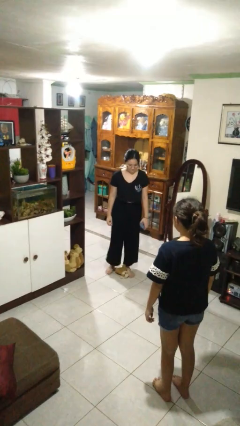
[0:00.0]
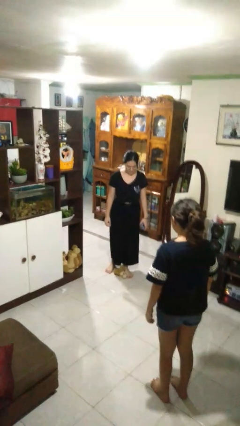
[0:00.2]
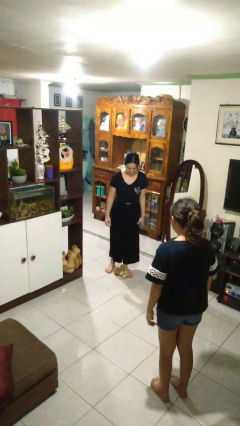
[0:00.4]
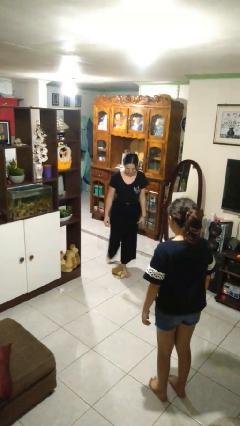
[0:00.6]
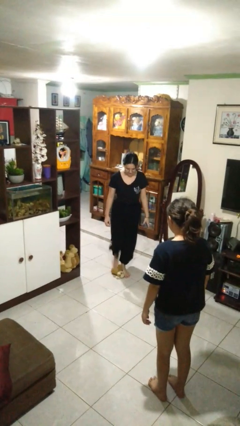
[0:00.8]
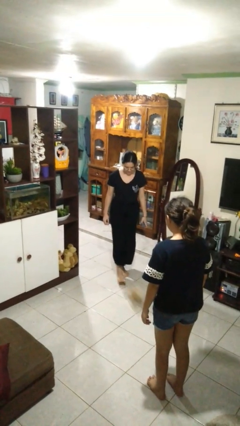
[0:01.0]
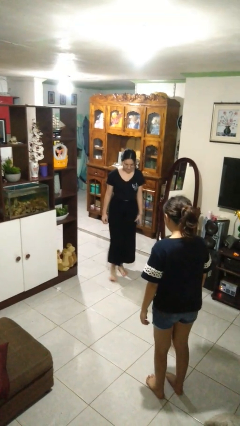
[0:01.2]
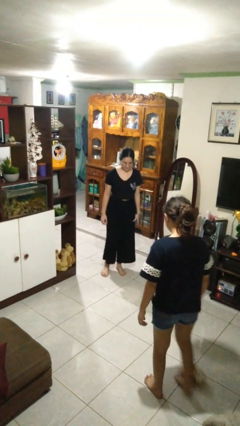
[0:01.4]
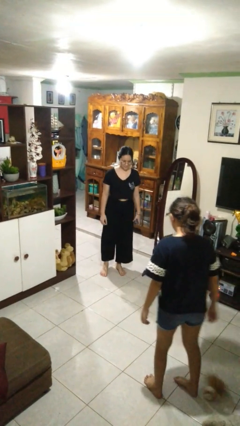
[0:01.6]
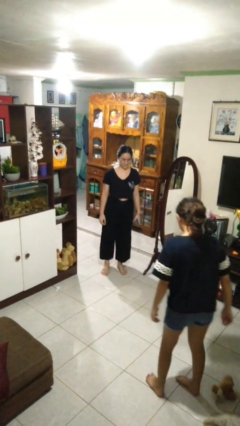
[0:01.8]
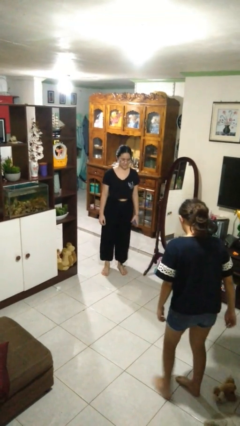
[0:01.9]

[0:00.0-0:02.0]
person kicks object to person

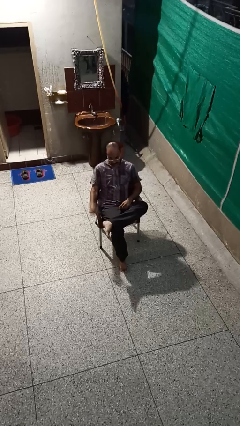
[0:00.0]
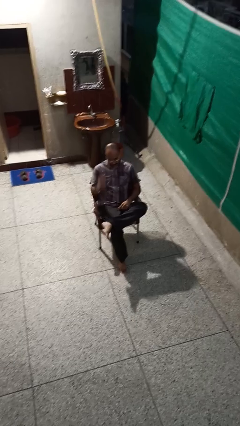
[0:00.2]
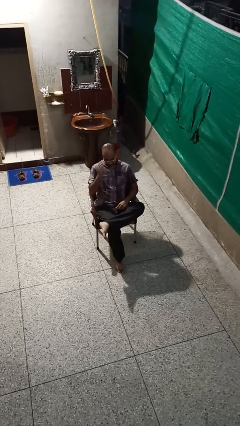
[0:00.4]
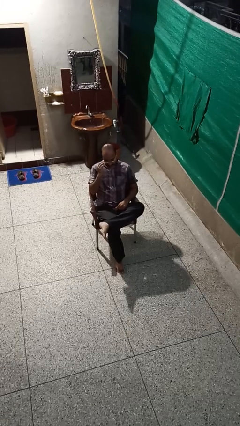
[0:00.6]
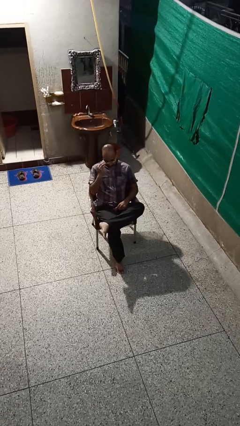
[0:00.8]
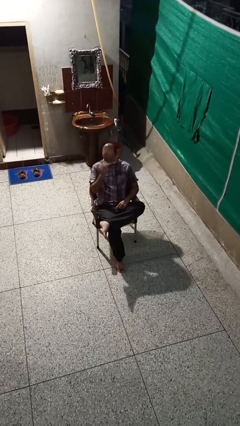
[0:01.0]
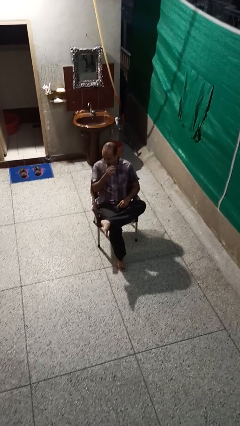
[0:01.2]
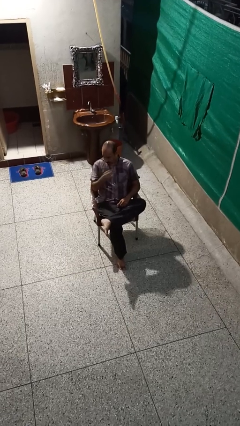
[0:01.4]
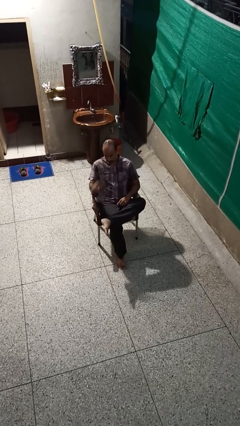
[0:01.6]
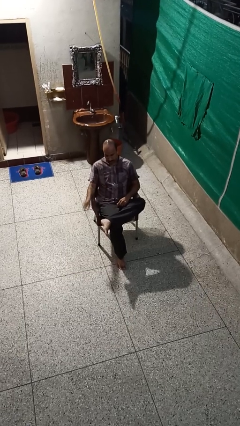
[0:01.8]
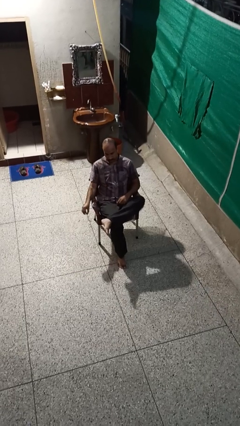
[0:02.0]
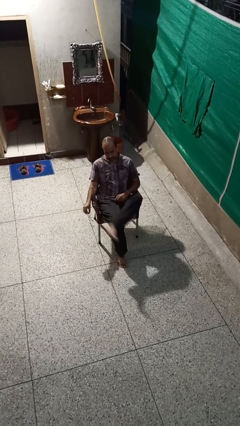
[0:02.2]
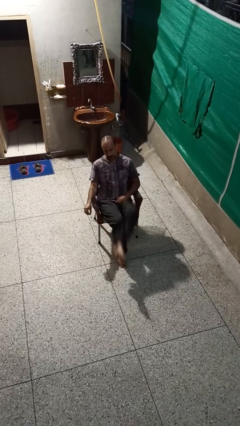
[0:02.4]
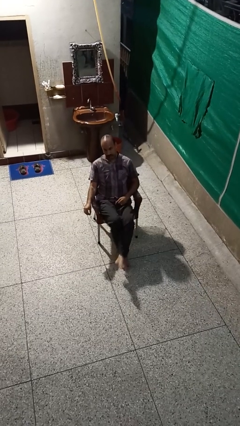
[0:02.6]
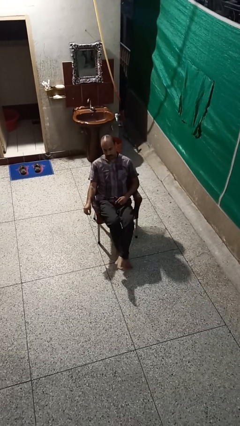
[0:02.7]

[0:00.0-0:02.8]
person takes off glasses

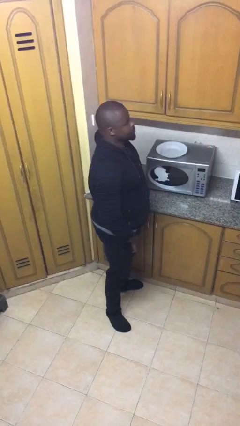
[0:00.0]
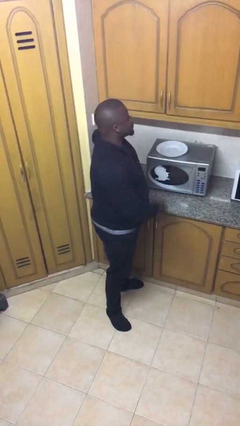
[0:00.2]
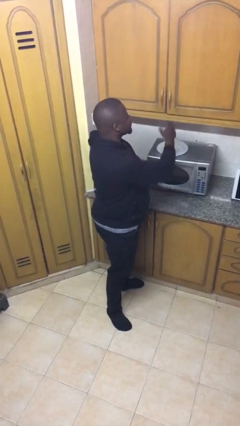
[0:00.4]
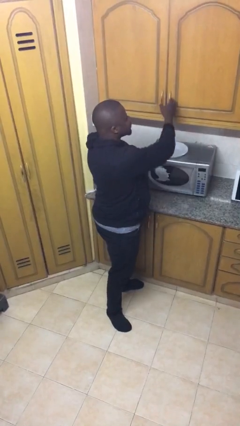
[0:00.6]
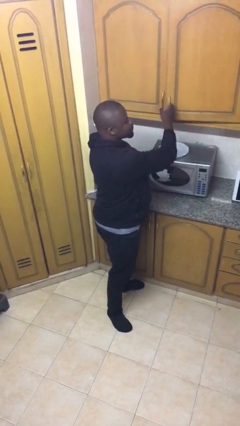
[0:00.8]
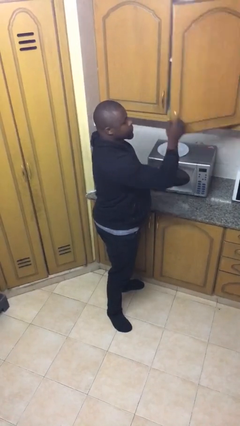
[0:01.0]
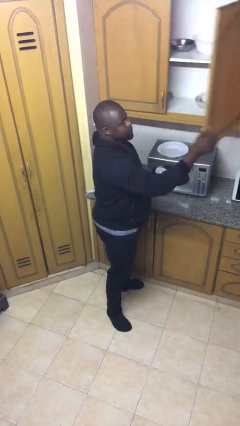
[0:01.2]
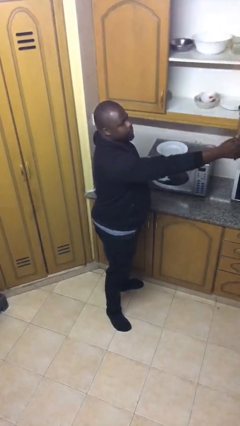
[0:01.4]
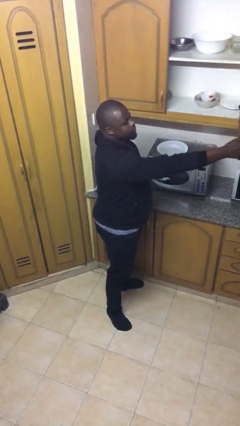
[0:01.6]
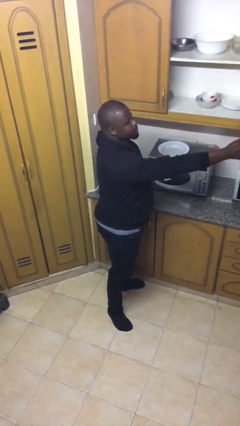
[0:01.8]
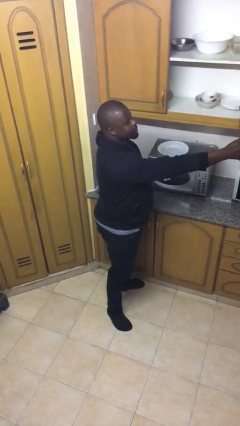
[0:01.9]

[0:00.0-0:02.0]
person opens cabinet

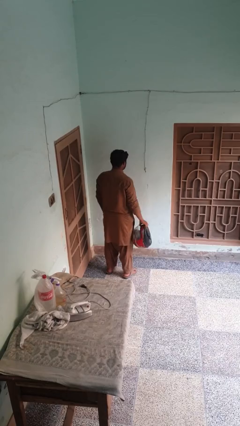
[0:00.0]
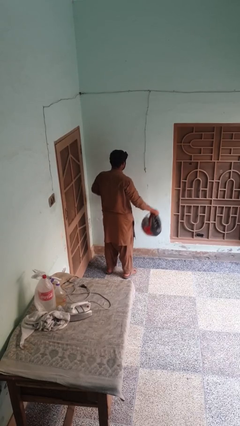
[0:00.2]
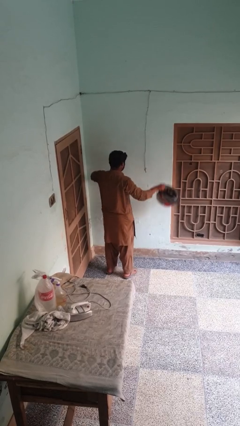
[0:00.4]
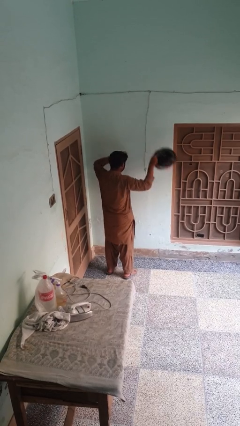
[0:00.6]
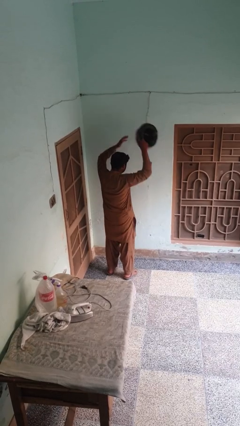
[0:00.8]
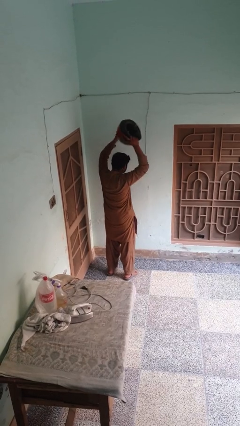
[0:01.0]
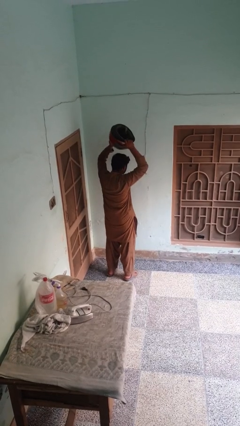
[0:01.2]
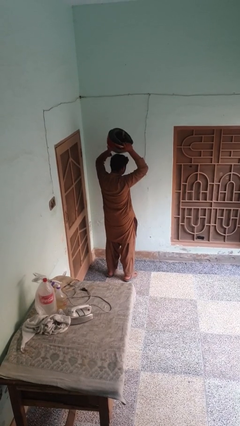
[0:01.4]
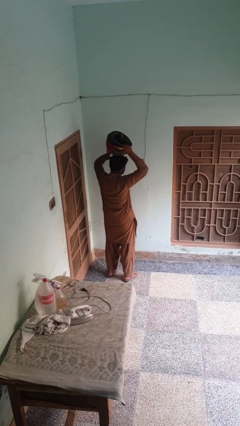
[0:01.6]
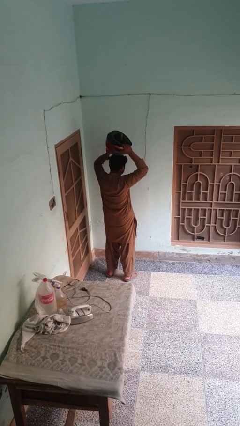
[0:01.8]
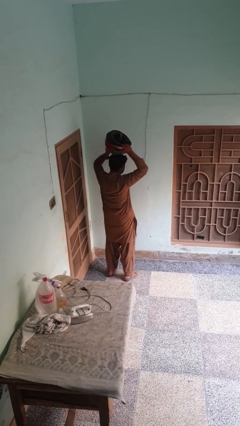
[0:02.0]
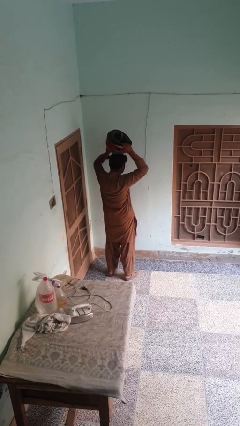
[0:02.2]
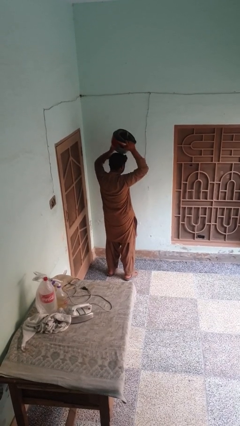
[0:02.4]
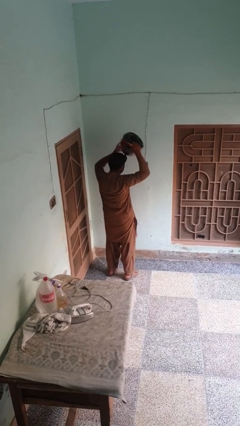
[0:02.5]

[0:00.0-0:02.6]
person holds object above head

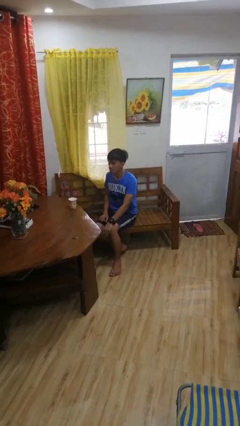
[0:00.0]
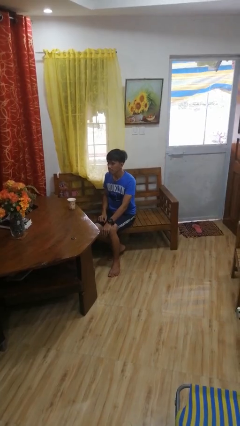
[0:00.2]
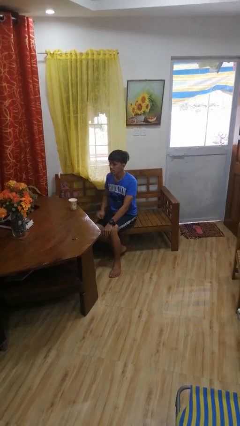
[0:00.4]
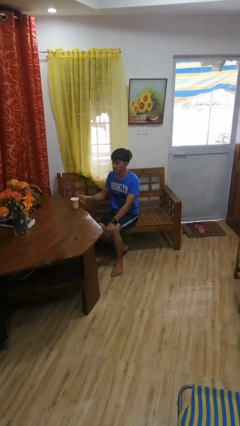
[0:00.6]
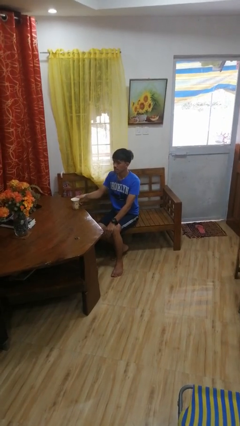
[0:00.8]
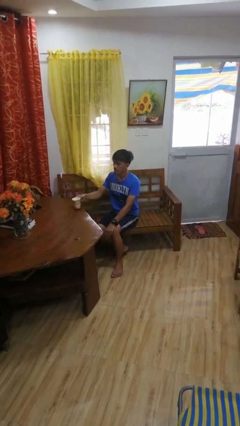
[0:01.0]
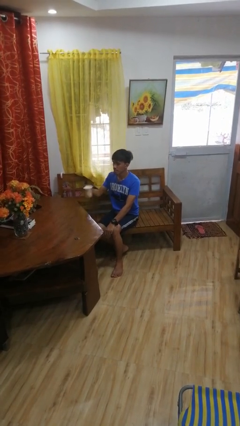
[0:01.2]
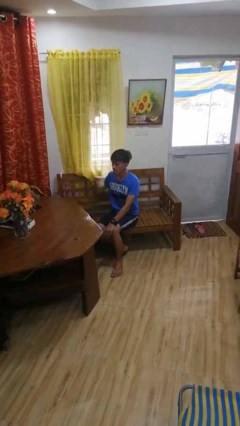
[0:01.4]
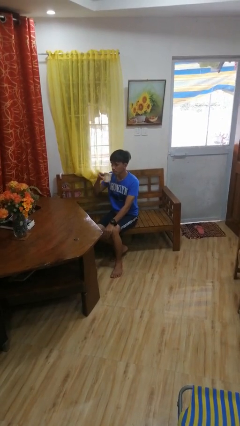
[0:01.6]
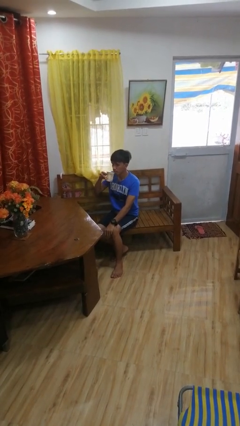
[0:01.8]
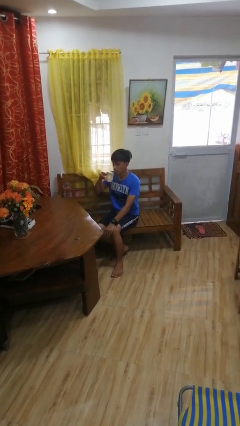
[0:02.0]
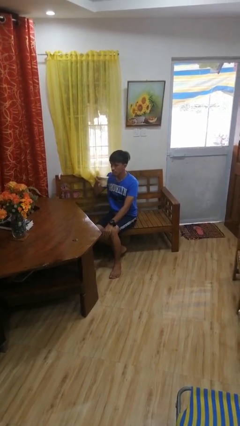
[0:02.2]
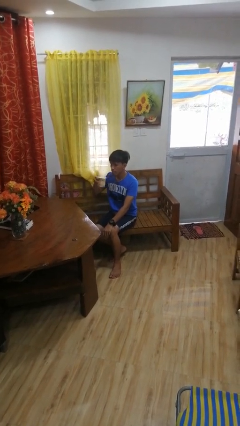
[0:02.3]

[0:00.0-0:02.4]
person picks up object from table

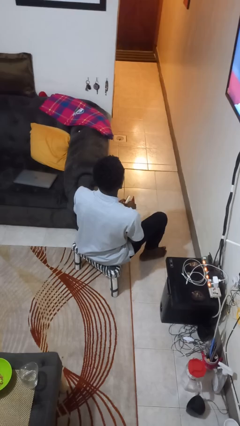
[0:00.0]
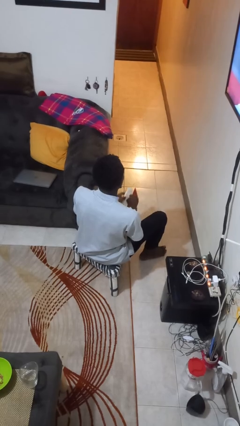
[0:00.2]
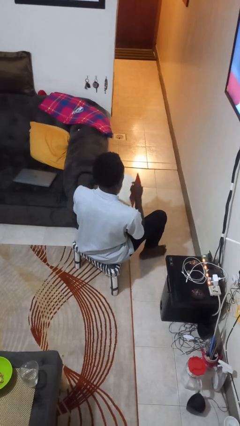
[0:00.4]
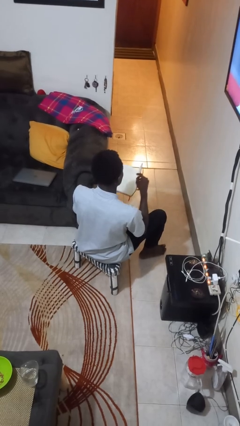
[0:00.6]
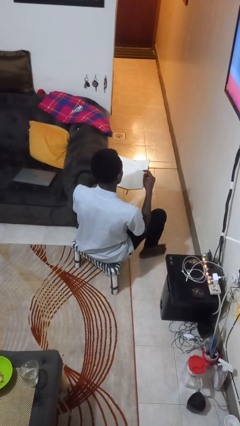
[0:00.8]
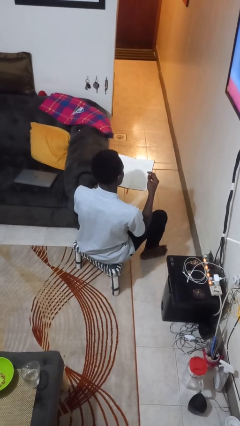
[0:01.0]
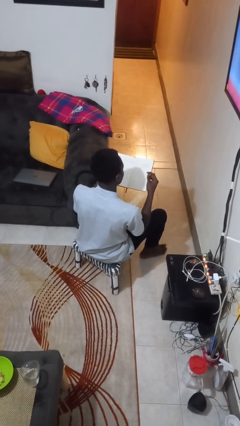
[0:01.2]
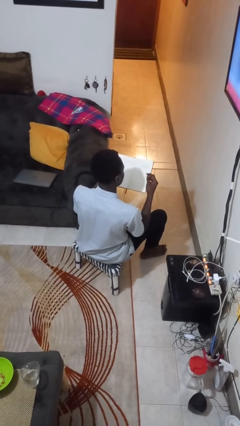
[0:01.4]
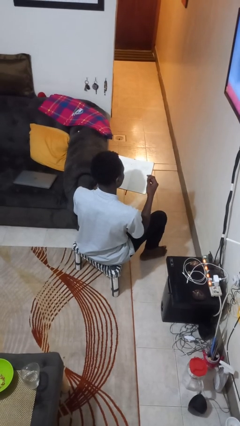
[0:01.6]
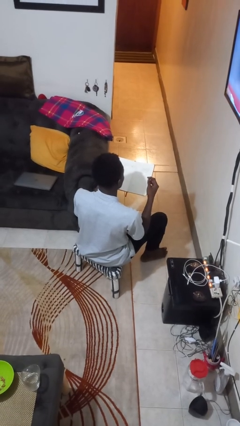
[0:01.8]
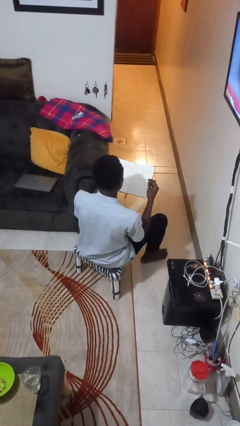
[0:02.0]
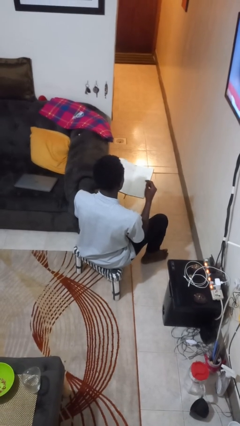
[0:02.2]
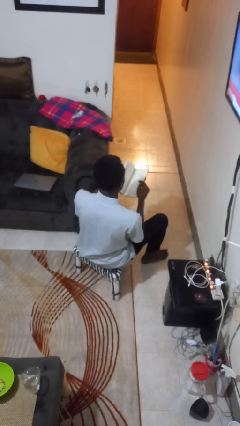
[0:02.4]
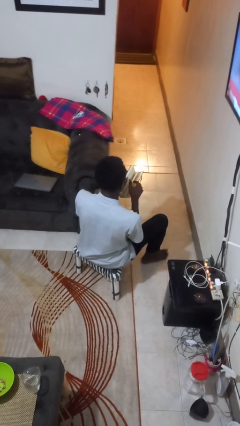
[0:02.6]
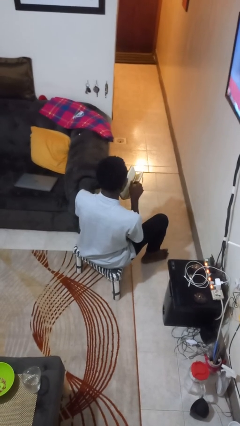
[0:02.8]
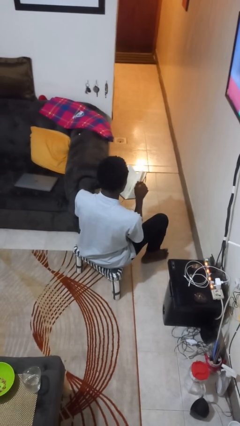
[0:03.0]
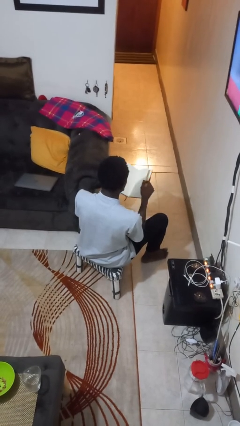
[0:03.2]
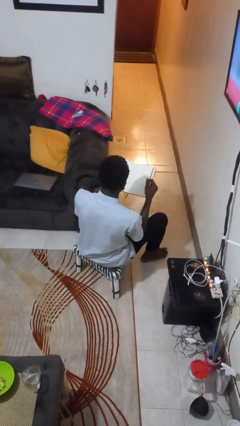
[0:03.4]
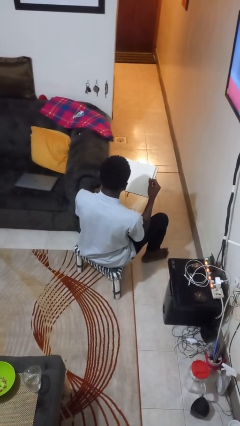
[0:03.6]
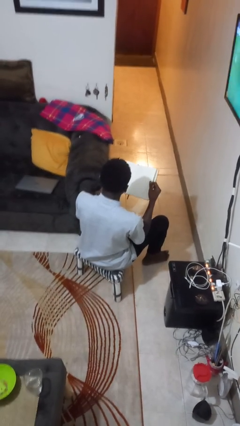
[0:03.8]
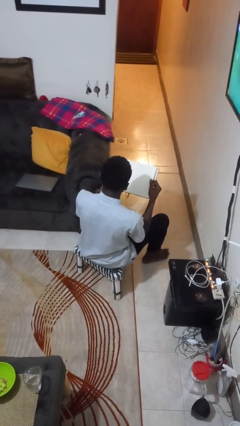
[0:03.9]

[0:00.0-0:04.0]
person reads book

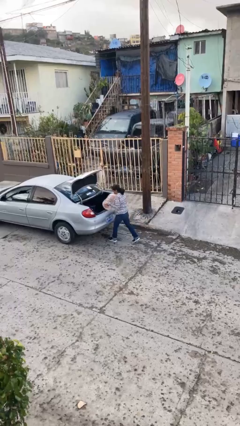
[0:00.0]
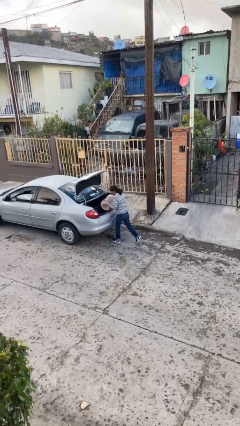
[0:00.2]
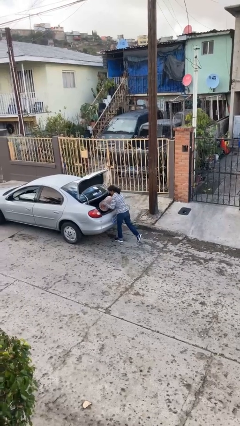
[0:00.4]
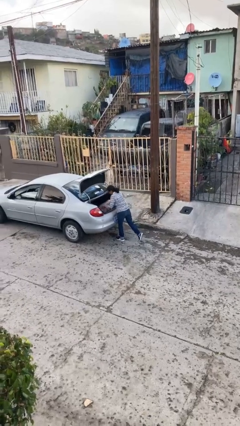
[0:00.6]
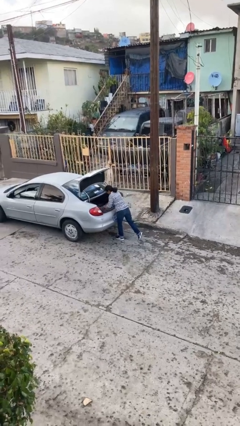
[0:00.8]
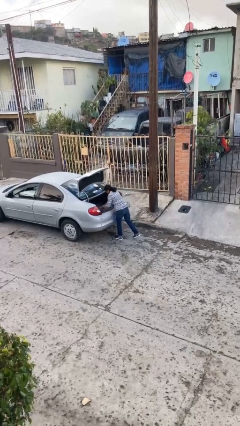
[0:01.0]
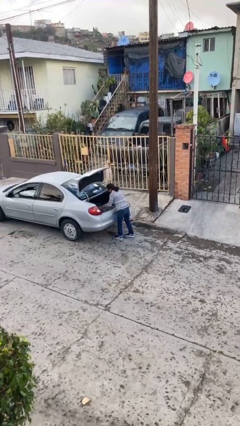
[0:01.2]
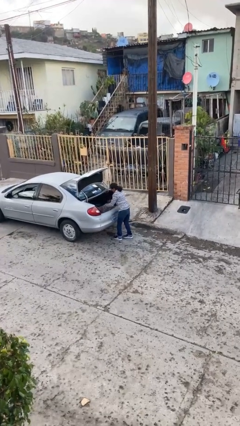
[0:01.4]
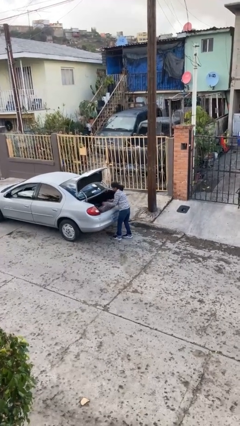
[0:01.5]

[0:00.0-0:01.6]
person loads car
